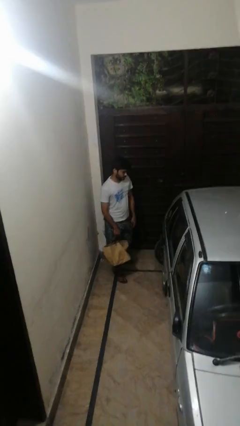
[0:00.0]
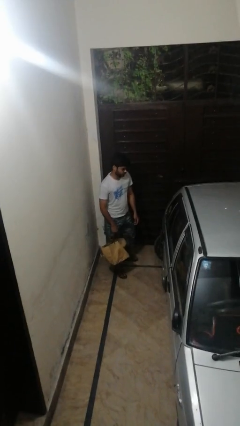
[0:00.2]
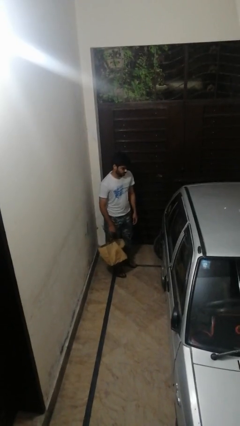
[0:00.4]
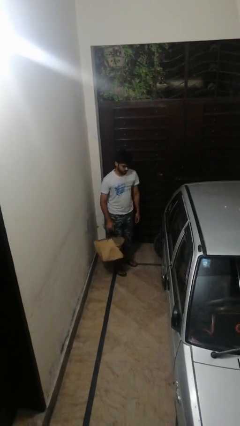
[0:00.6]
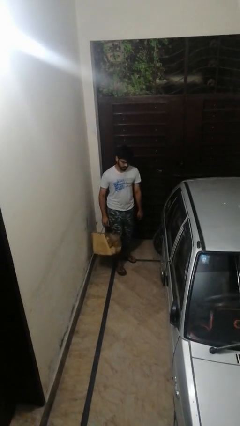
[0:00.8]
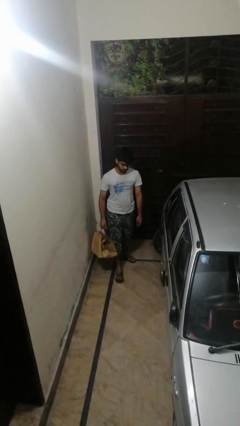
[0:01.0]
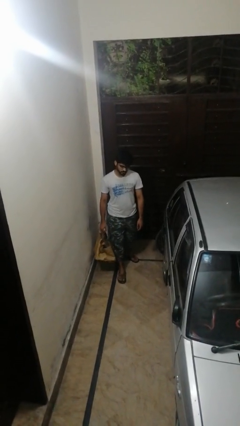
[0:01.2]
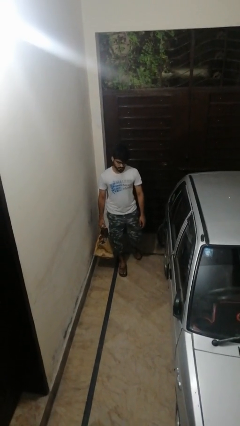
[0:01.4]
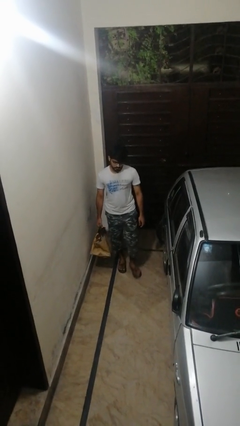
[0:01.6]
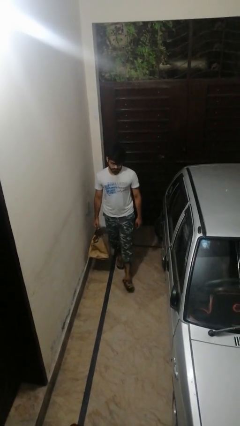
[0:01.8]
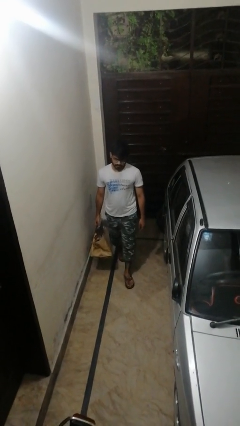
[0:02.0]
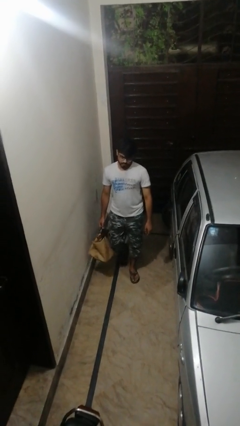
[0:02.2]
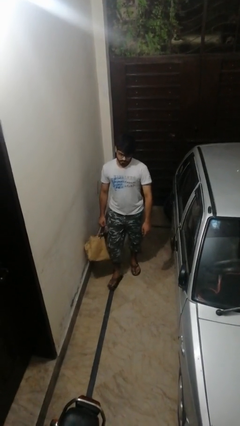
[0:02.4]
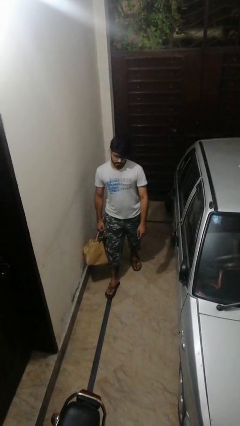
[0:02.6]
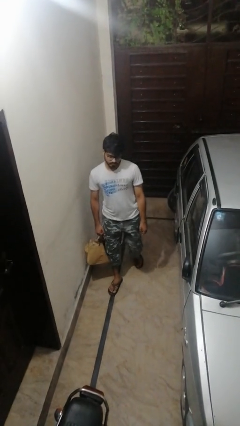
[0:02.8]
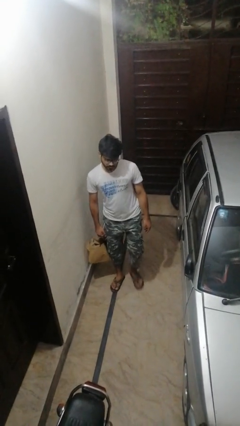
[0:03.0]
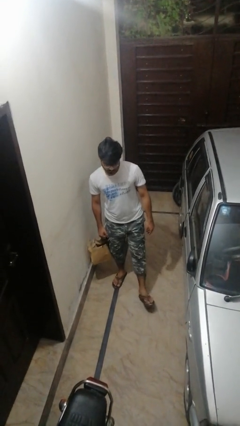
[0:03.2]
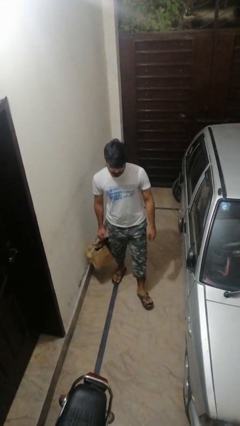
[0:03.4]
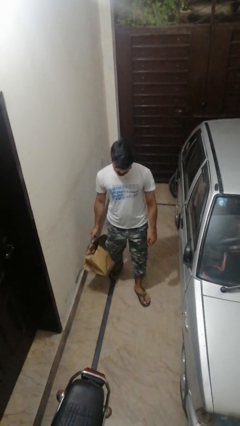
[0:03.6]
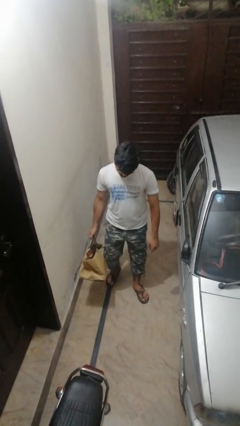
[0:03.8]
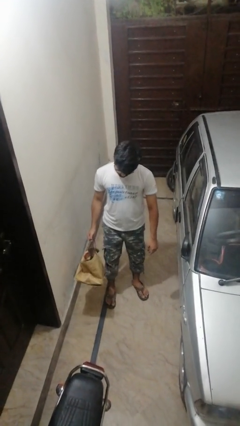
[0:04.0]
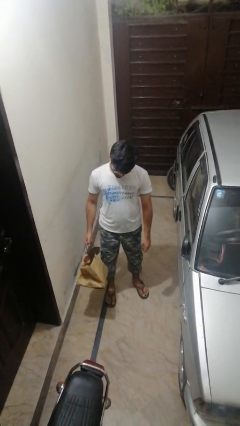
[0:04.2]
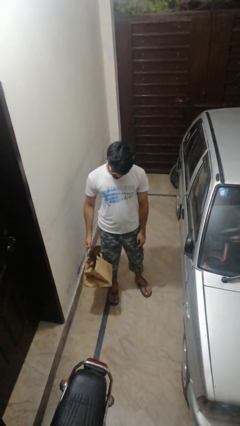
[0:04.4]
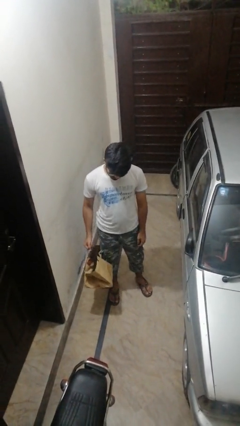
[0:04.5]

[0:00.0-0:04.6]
person carries groceries

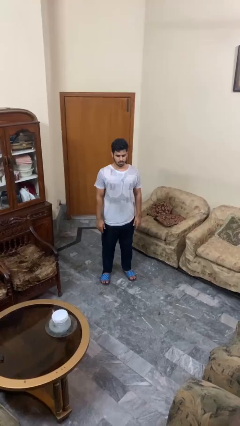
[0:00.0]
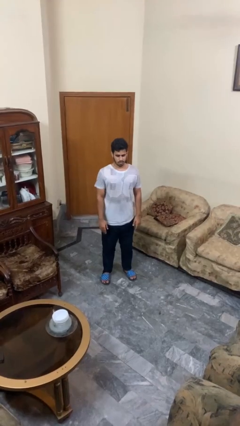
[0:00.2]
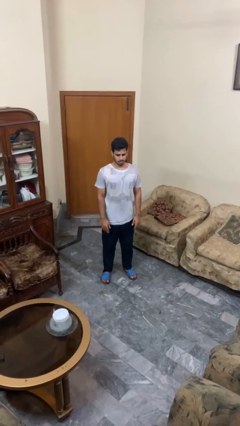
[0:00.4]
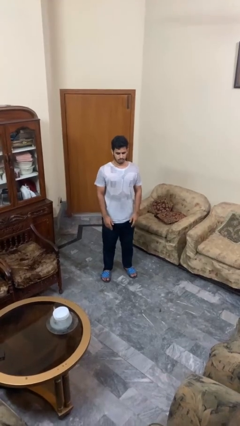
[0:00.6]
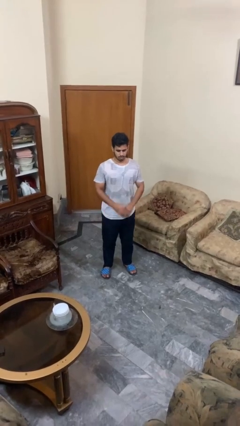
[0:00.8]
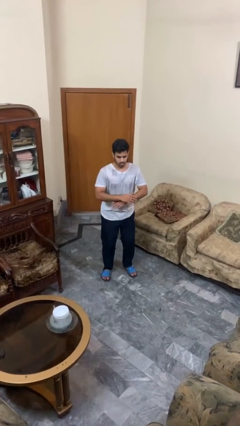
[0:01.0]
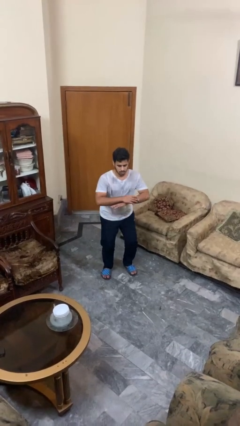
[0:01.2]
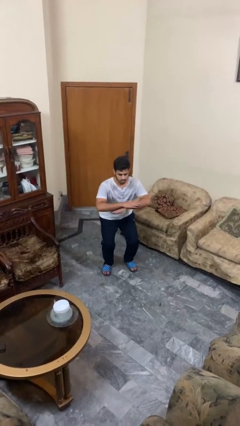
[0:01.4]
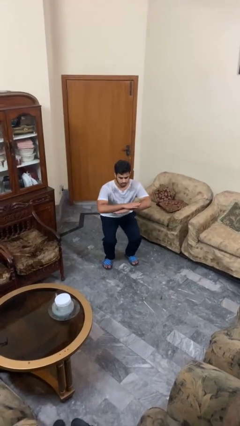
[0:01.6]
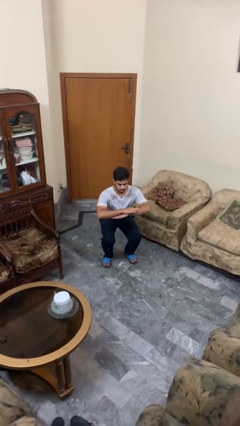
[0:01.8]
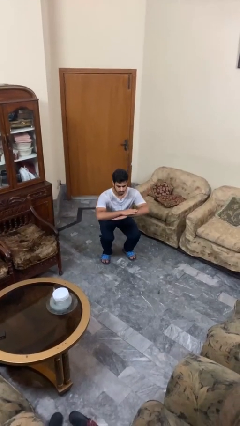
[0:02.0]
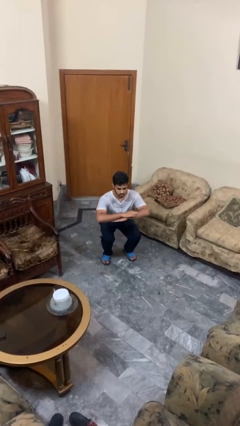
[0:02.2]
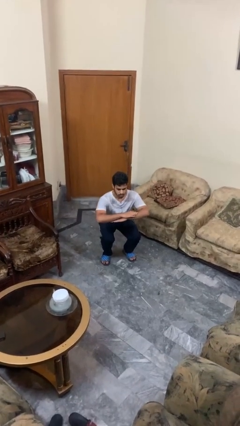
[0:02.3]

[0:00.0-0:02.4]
person squats

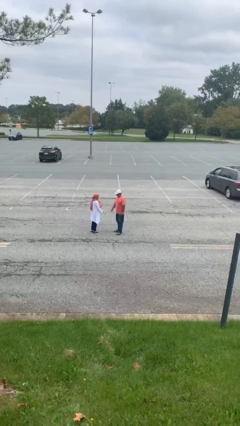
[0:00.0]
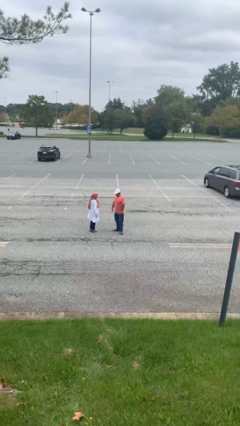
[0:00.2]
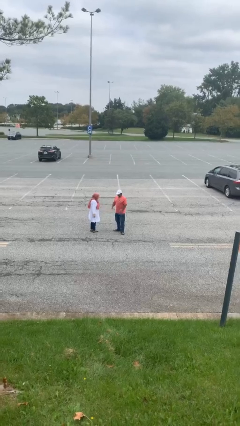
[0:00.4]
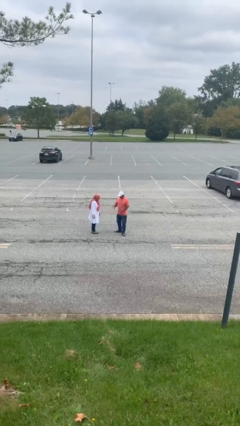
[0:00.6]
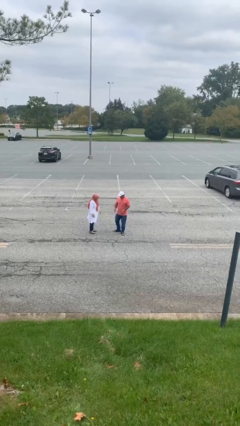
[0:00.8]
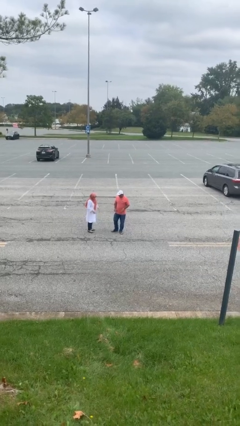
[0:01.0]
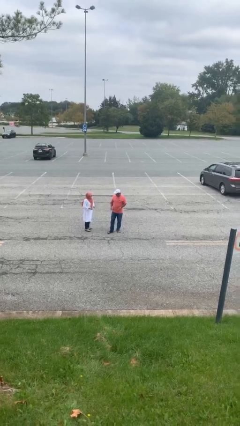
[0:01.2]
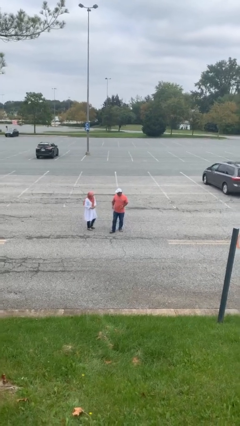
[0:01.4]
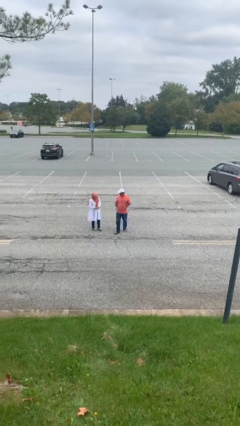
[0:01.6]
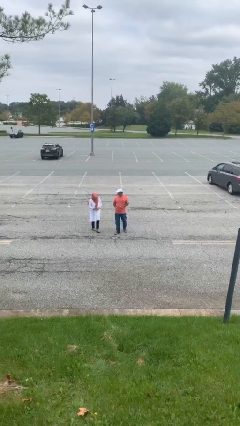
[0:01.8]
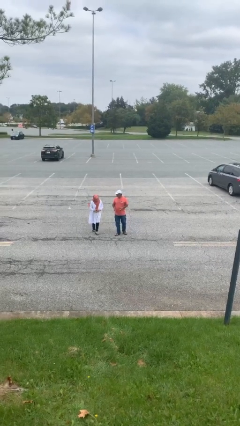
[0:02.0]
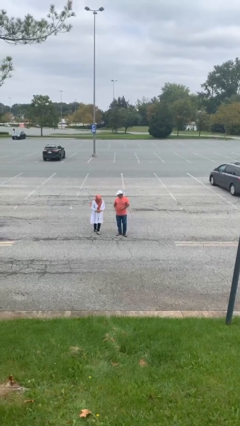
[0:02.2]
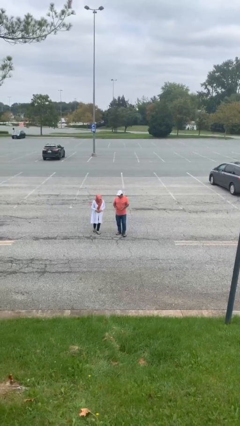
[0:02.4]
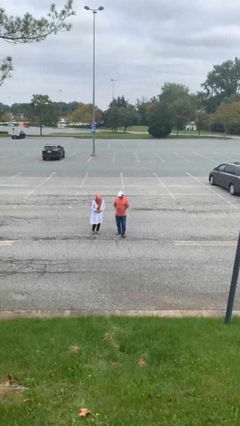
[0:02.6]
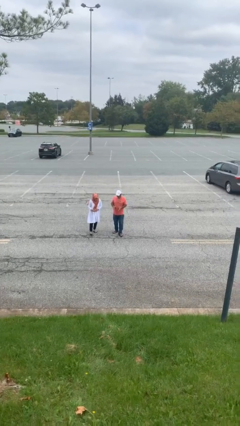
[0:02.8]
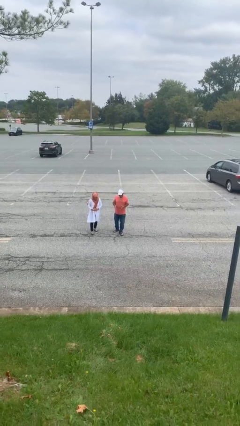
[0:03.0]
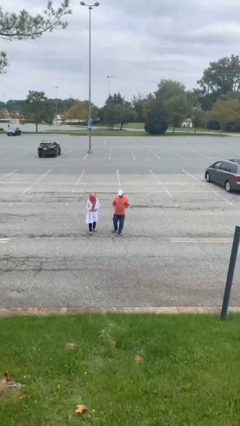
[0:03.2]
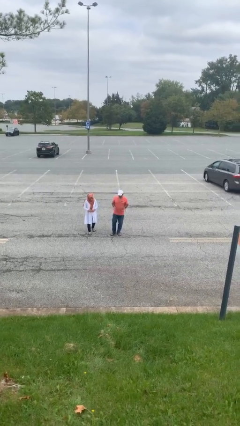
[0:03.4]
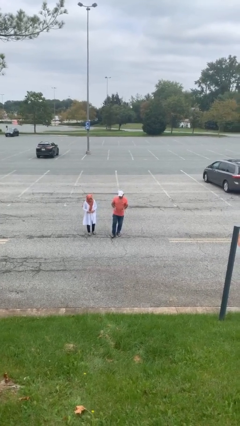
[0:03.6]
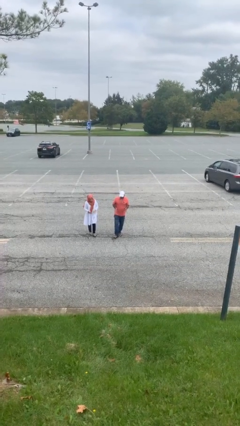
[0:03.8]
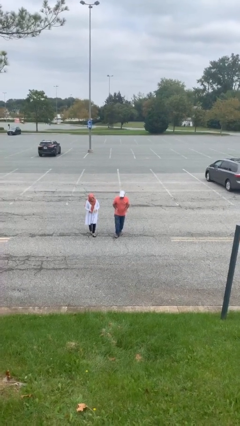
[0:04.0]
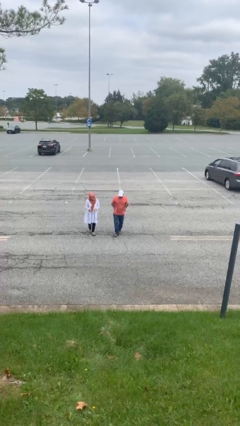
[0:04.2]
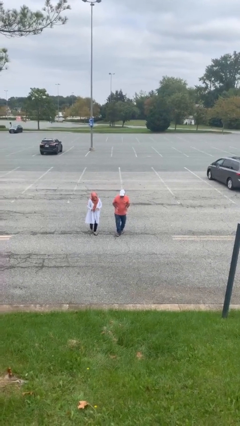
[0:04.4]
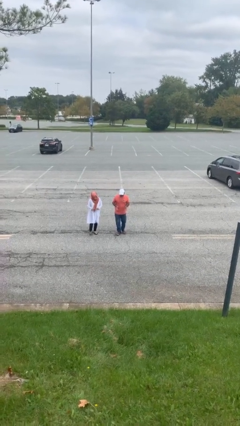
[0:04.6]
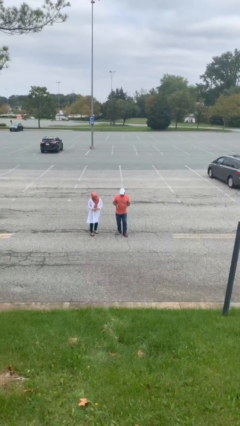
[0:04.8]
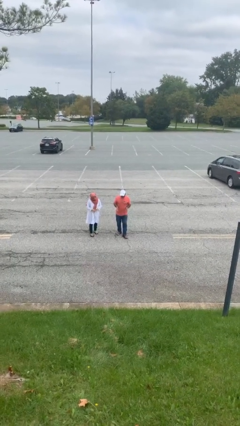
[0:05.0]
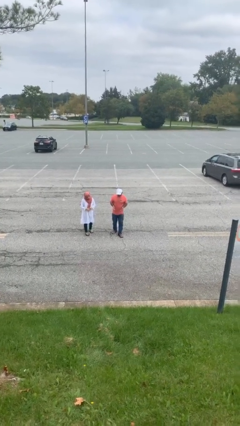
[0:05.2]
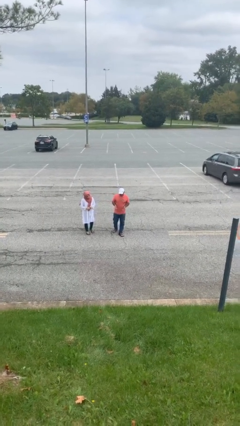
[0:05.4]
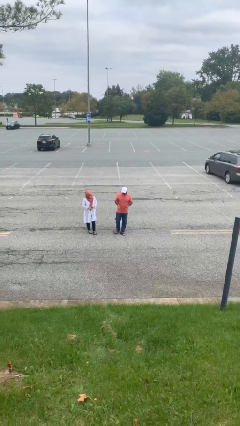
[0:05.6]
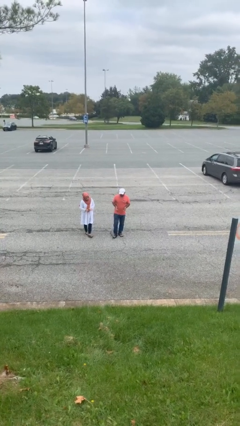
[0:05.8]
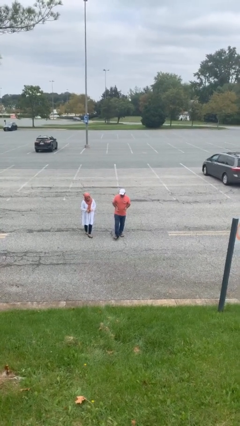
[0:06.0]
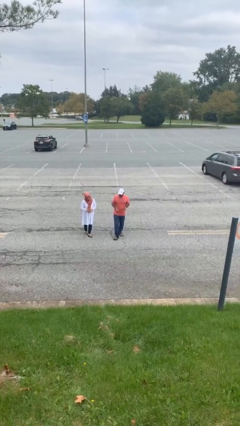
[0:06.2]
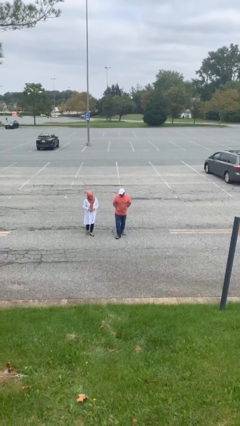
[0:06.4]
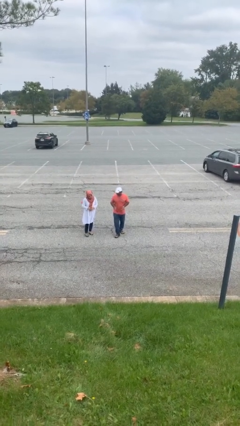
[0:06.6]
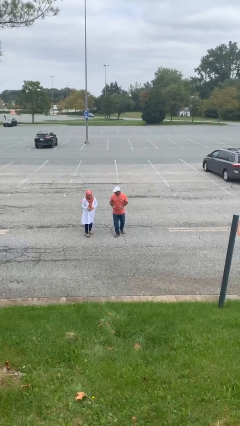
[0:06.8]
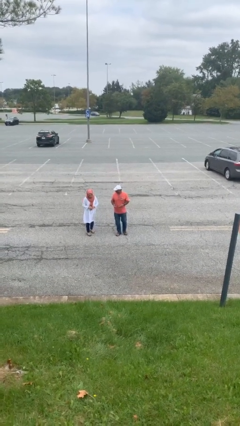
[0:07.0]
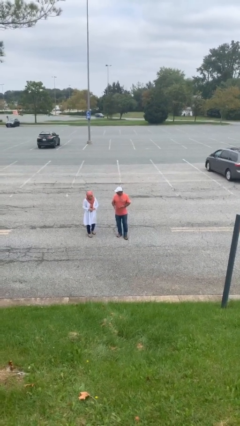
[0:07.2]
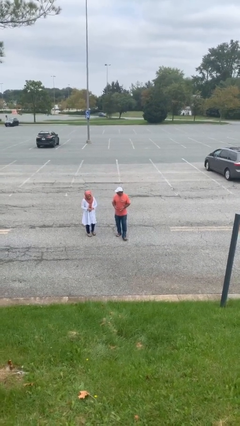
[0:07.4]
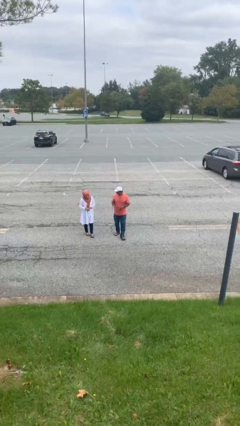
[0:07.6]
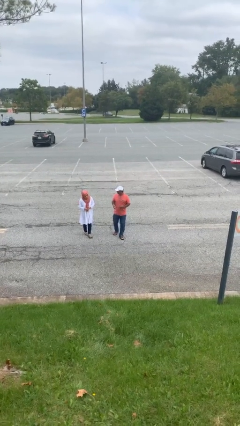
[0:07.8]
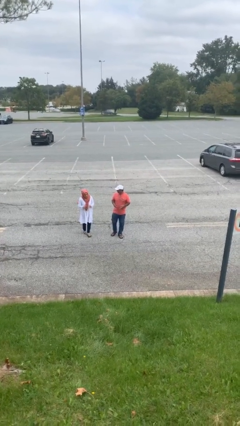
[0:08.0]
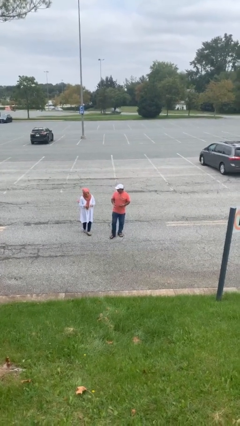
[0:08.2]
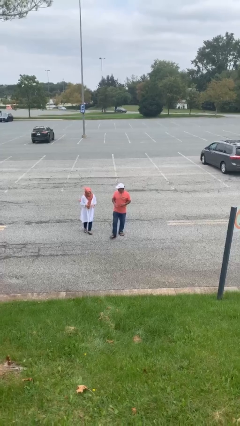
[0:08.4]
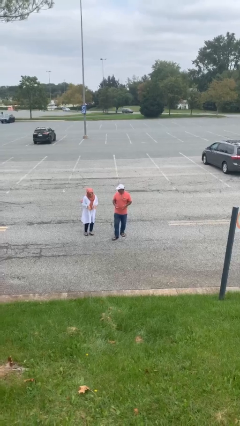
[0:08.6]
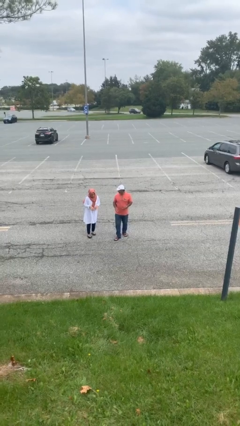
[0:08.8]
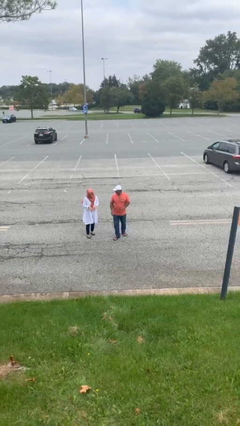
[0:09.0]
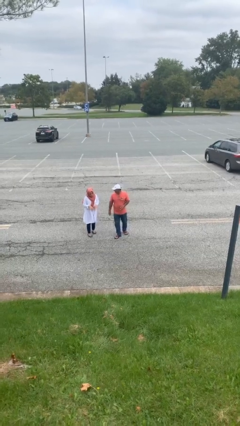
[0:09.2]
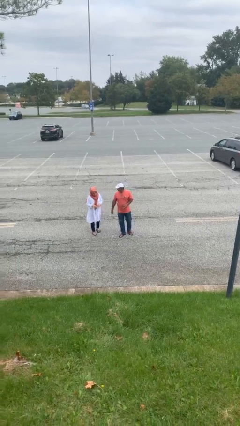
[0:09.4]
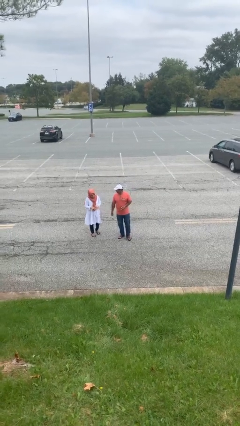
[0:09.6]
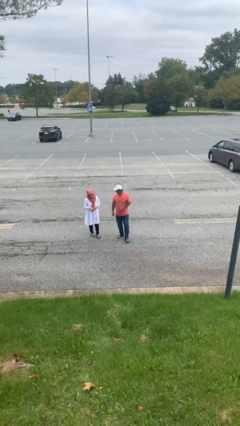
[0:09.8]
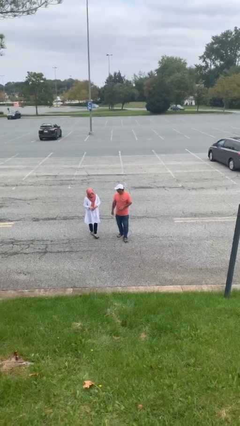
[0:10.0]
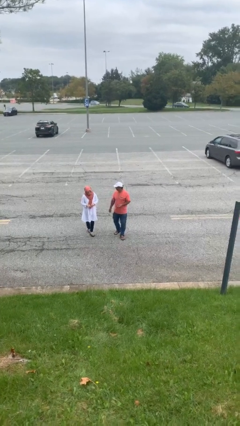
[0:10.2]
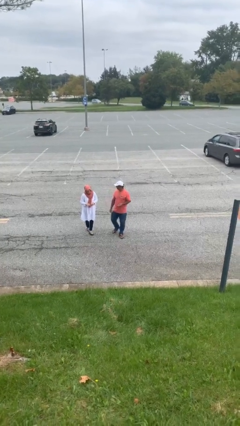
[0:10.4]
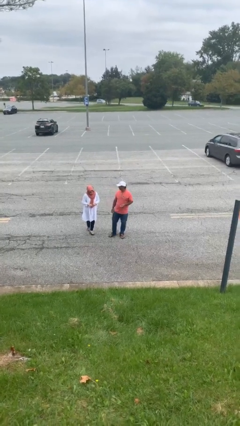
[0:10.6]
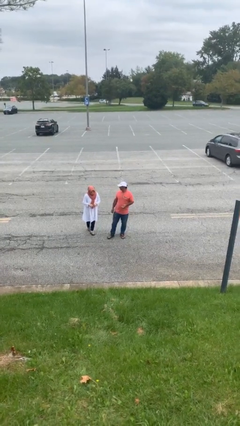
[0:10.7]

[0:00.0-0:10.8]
person talks to person
